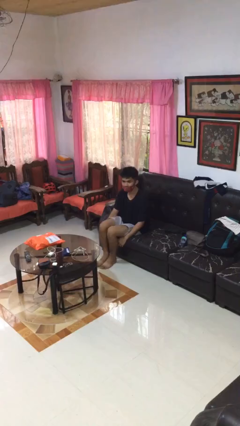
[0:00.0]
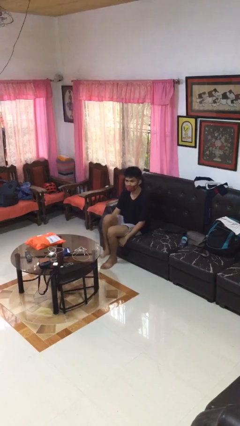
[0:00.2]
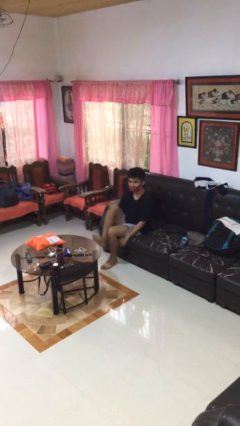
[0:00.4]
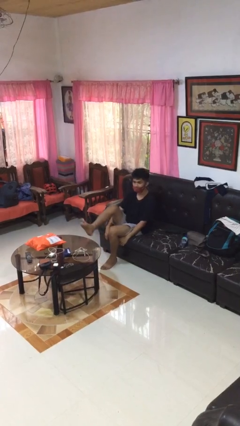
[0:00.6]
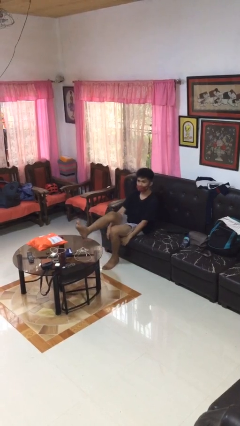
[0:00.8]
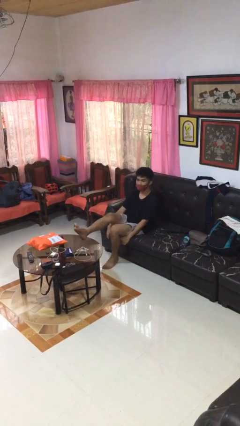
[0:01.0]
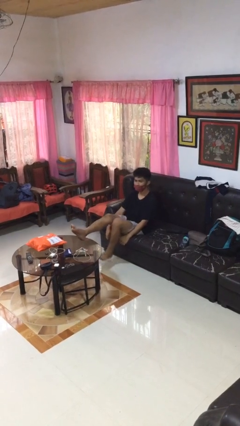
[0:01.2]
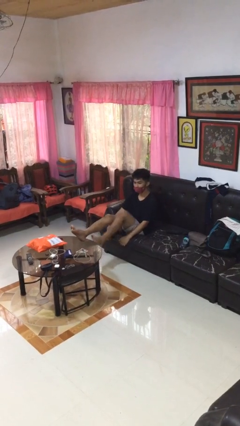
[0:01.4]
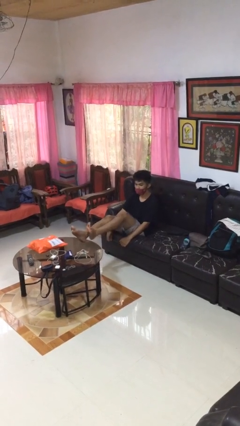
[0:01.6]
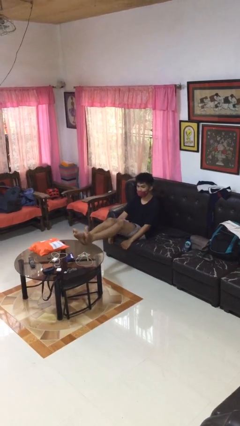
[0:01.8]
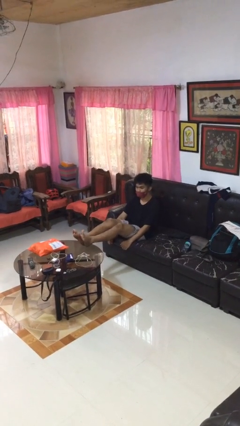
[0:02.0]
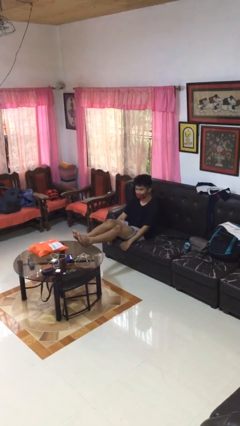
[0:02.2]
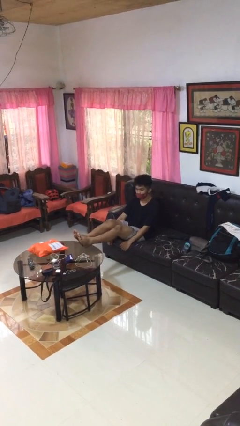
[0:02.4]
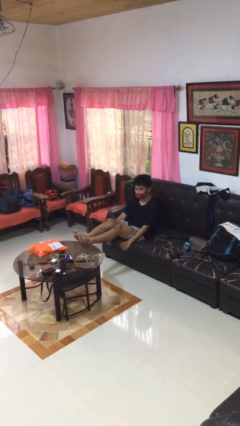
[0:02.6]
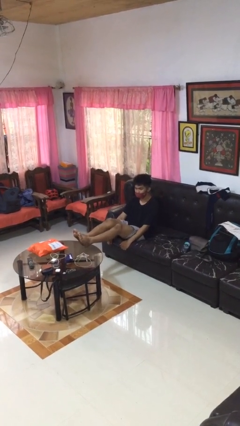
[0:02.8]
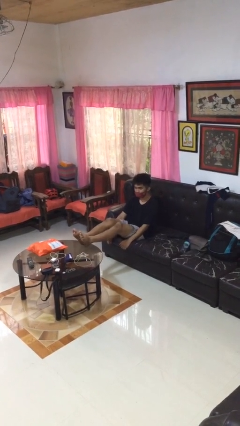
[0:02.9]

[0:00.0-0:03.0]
person puts feet up

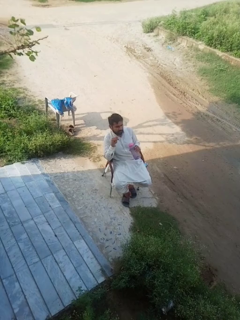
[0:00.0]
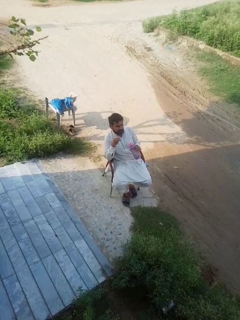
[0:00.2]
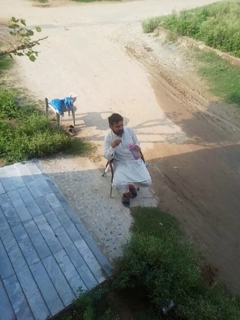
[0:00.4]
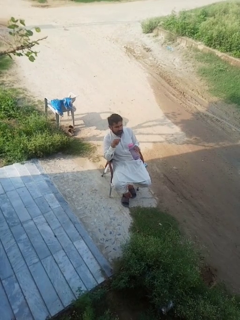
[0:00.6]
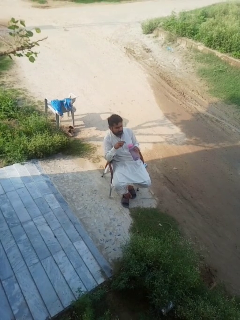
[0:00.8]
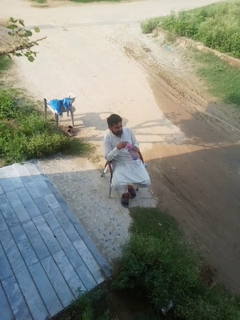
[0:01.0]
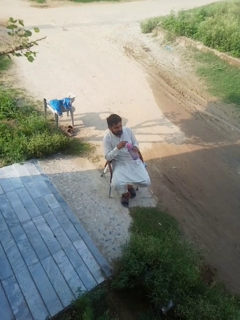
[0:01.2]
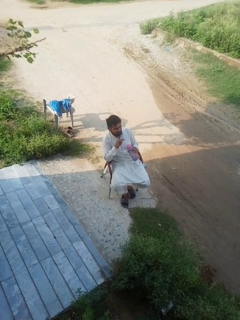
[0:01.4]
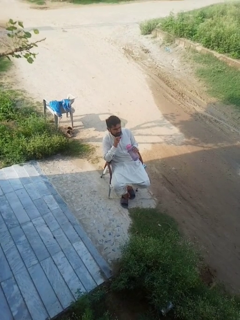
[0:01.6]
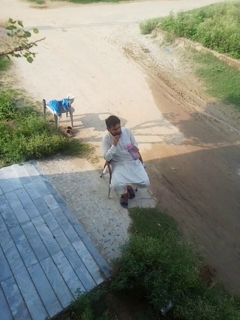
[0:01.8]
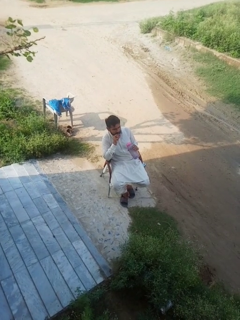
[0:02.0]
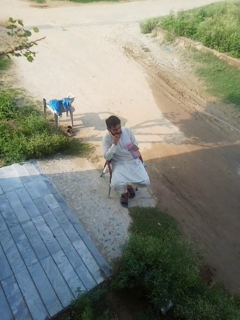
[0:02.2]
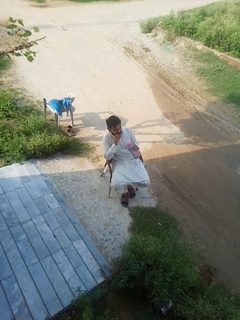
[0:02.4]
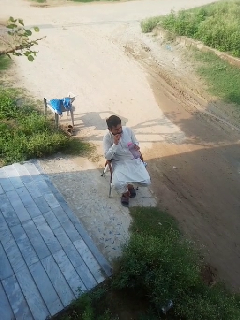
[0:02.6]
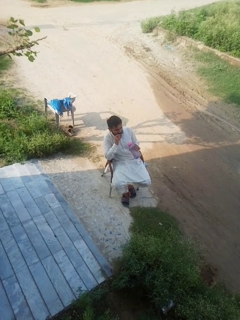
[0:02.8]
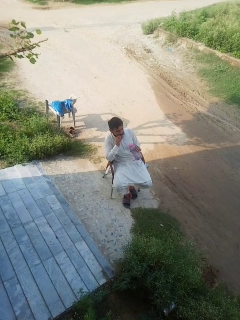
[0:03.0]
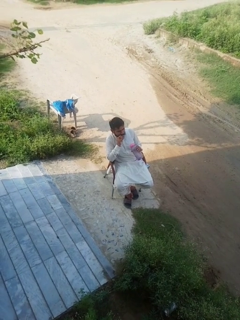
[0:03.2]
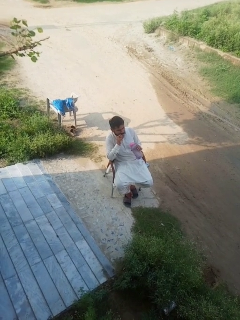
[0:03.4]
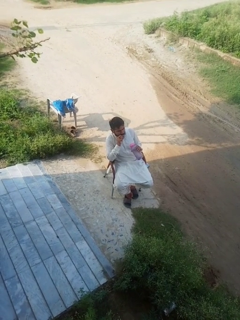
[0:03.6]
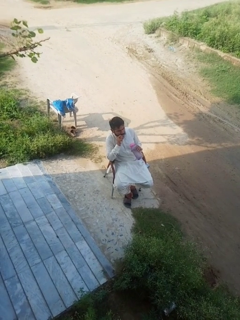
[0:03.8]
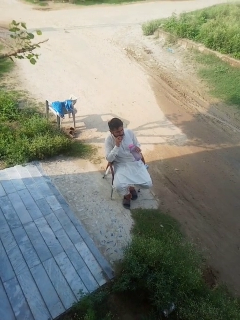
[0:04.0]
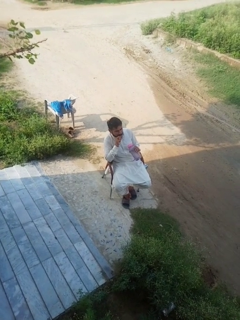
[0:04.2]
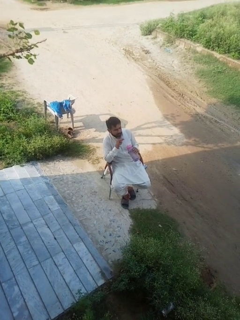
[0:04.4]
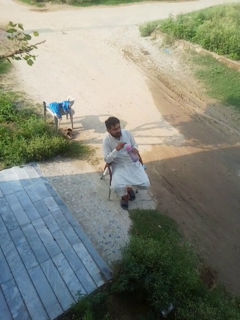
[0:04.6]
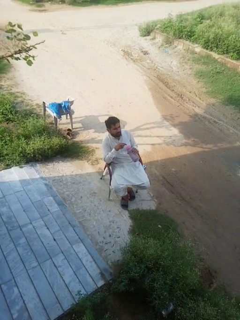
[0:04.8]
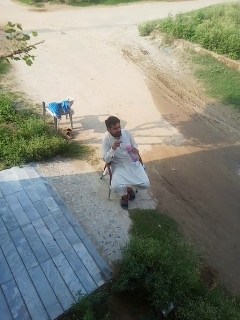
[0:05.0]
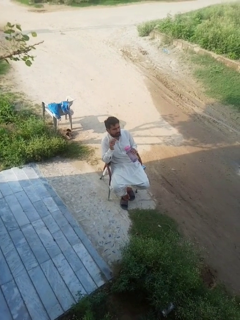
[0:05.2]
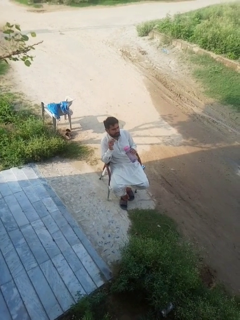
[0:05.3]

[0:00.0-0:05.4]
person drinks from straw

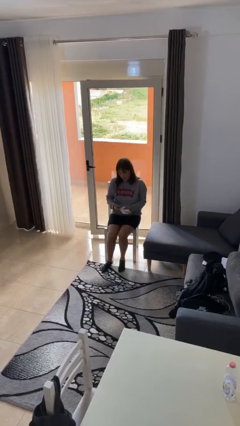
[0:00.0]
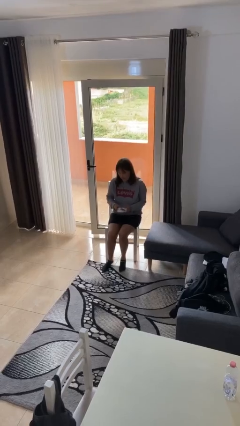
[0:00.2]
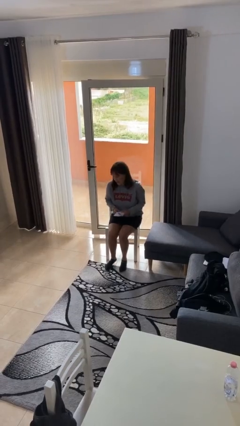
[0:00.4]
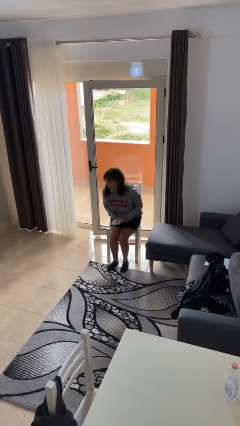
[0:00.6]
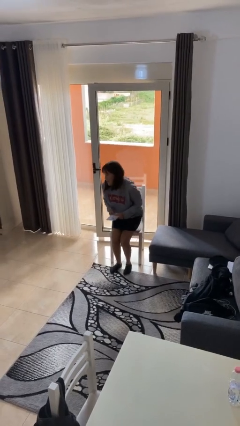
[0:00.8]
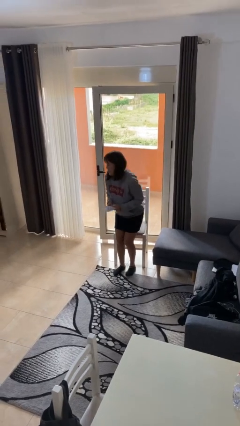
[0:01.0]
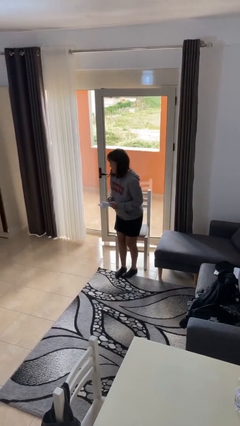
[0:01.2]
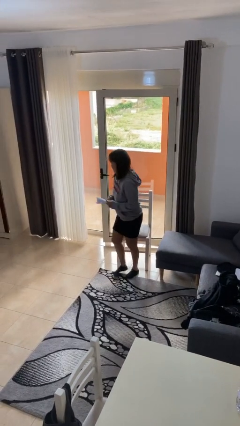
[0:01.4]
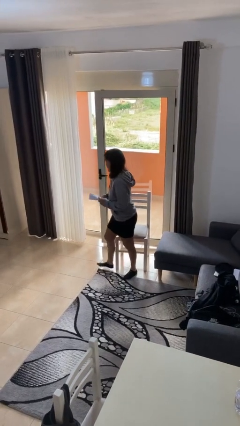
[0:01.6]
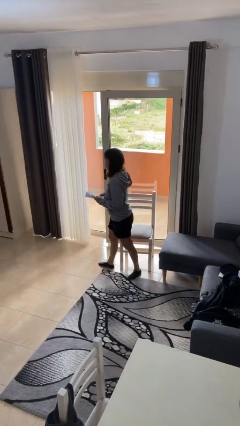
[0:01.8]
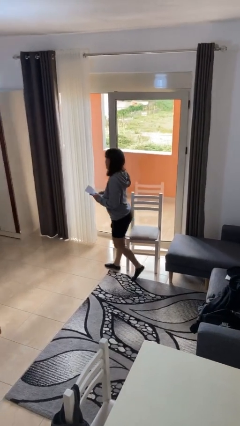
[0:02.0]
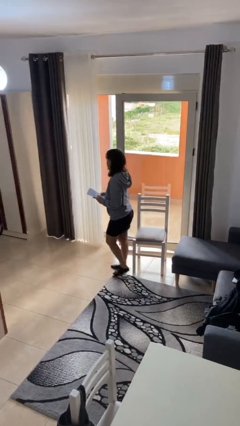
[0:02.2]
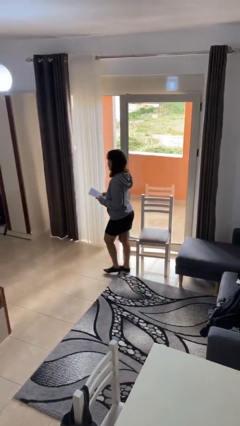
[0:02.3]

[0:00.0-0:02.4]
person stands up

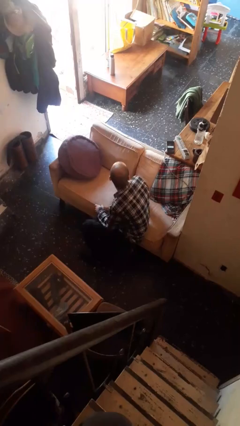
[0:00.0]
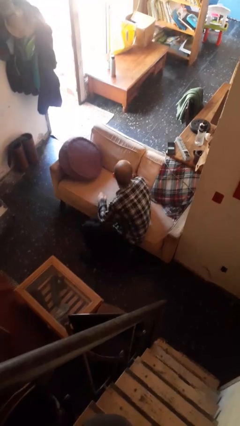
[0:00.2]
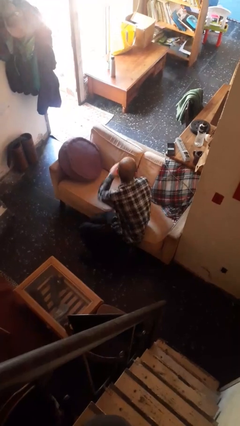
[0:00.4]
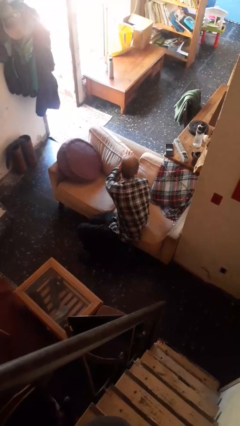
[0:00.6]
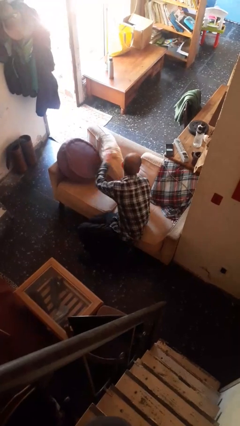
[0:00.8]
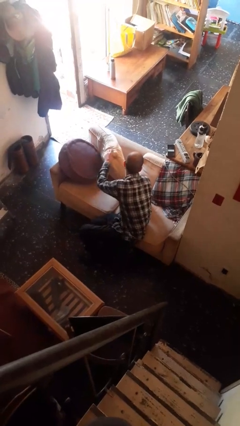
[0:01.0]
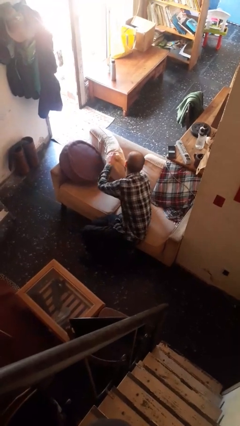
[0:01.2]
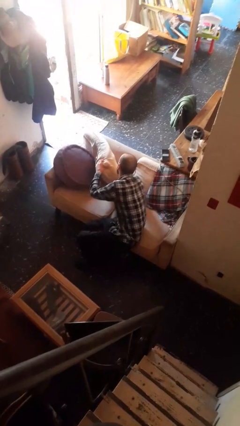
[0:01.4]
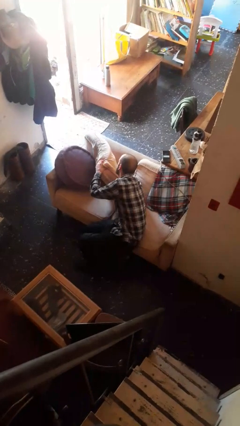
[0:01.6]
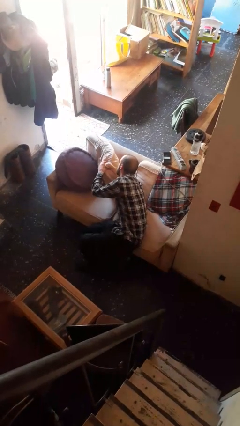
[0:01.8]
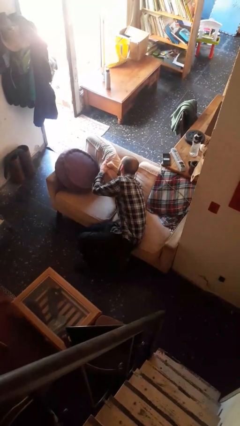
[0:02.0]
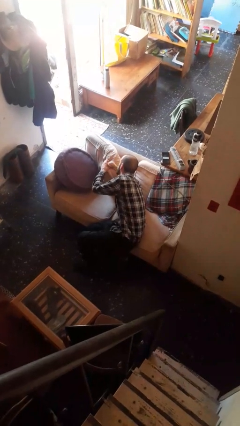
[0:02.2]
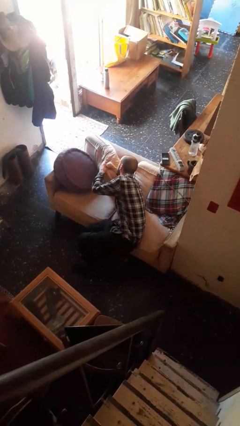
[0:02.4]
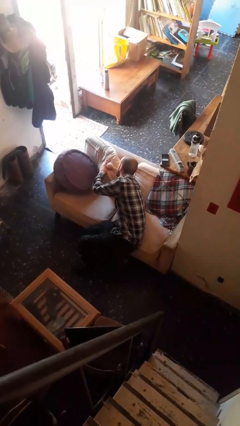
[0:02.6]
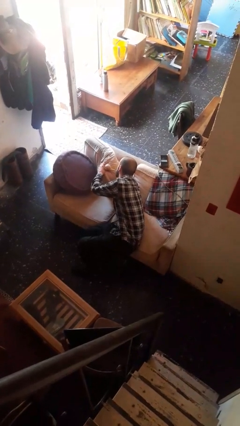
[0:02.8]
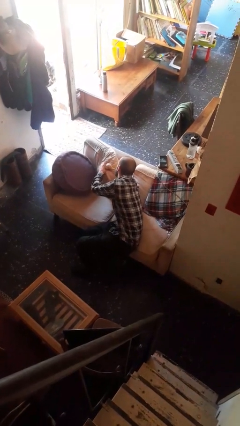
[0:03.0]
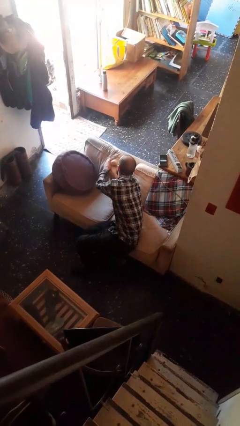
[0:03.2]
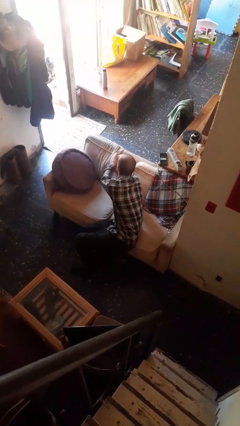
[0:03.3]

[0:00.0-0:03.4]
person searches in couch

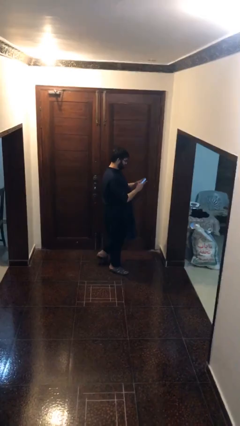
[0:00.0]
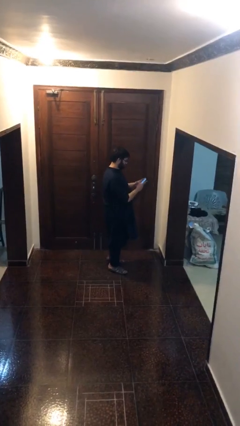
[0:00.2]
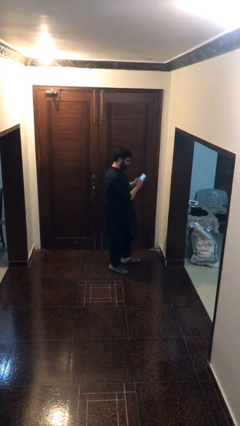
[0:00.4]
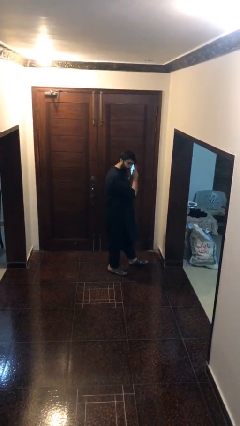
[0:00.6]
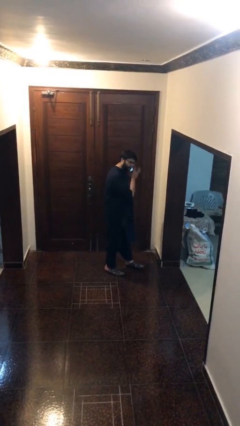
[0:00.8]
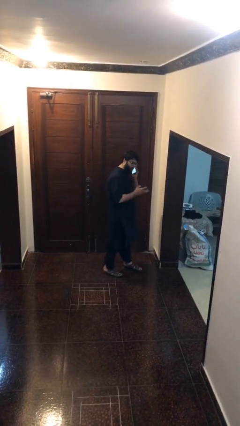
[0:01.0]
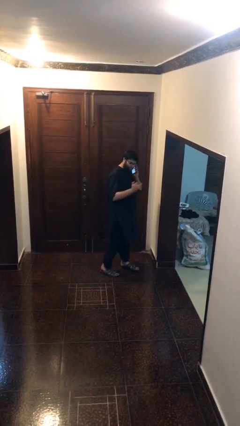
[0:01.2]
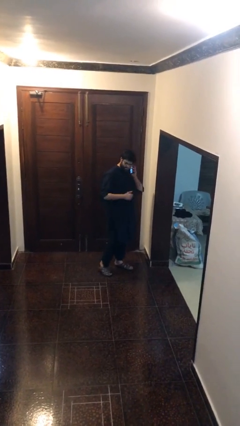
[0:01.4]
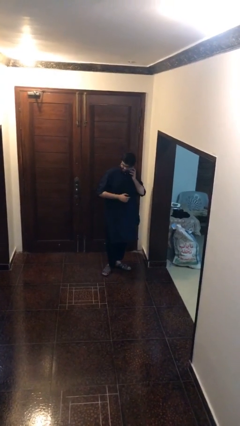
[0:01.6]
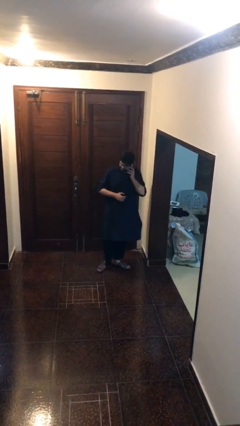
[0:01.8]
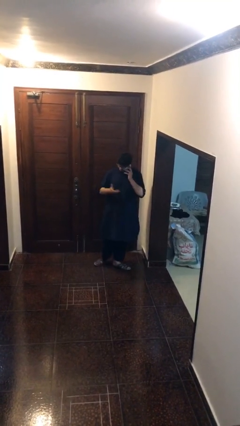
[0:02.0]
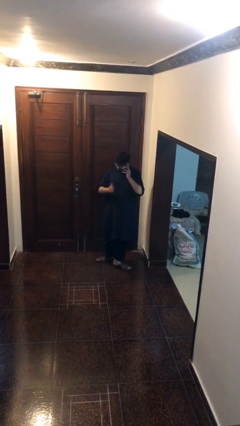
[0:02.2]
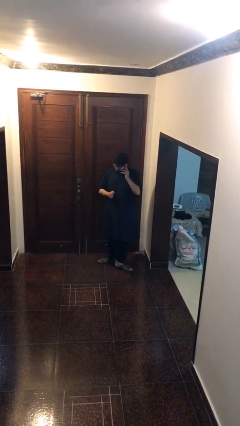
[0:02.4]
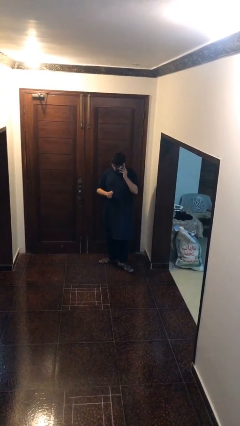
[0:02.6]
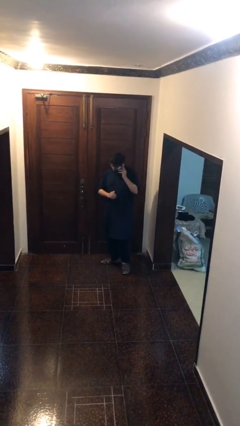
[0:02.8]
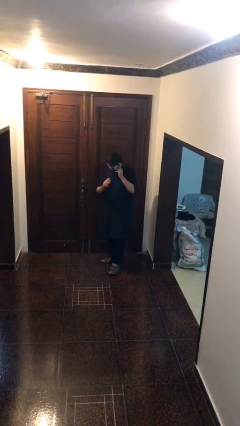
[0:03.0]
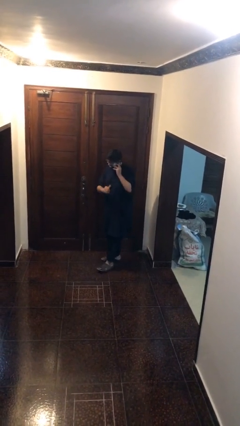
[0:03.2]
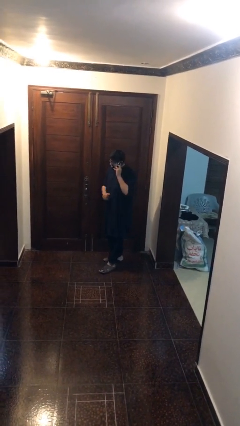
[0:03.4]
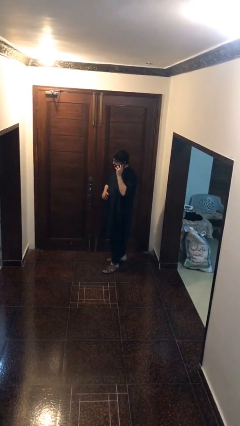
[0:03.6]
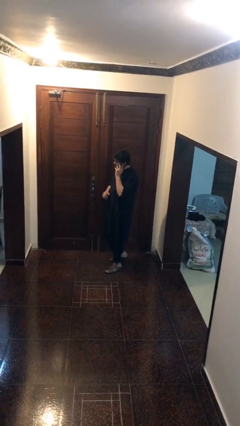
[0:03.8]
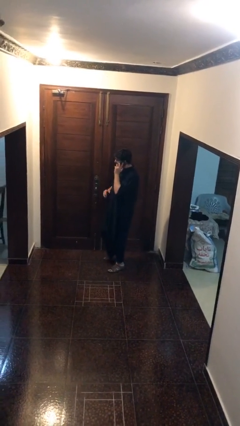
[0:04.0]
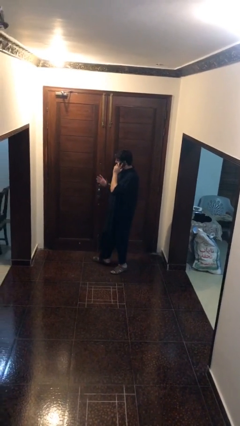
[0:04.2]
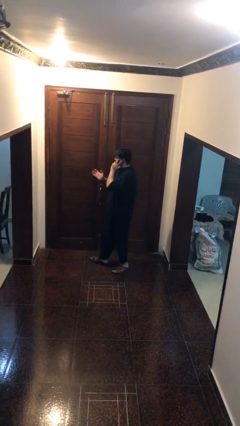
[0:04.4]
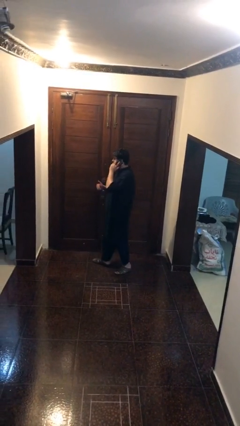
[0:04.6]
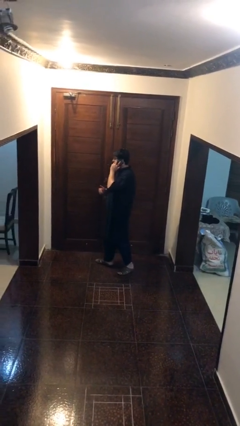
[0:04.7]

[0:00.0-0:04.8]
person talks on phone
